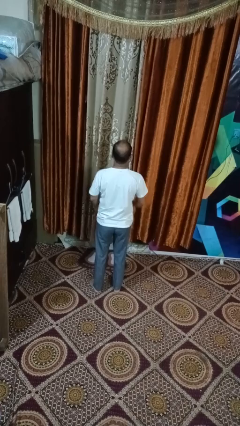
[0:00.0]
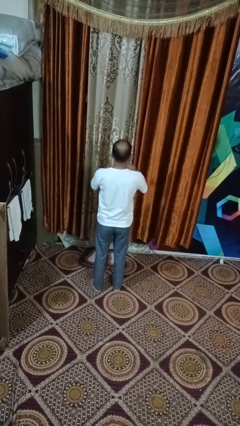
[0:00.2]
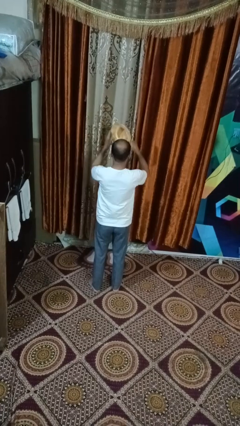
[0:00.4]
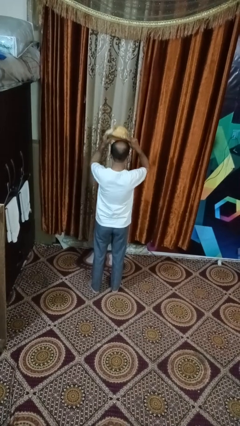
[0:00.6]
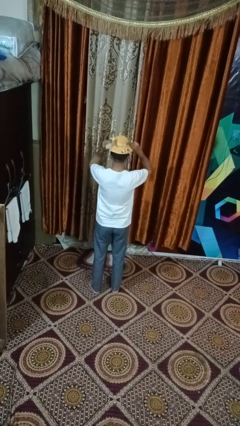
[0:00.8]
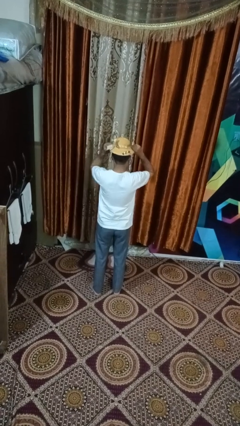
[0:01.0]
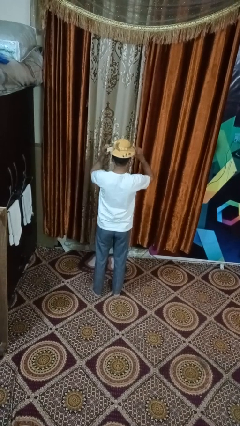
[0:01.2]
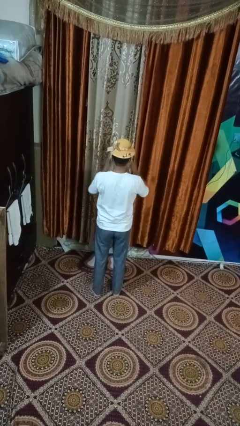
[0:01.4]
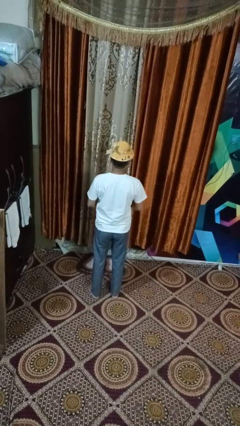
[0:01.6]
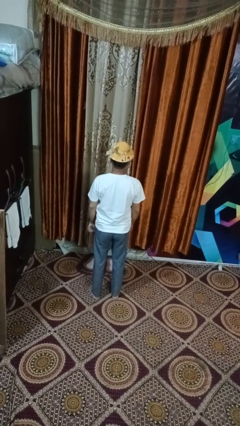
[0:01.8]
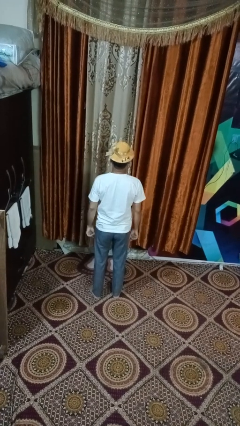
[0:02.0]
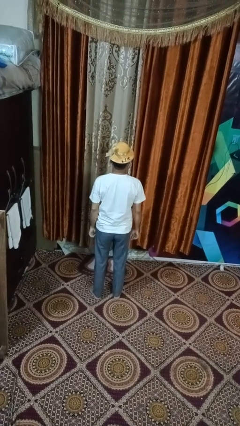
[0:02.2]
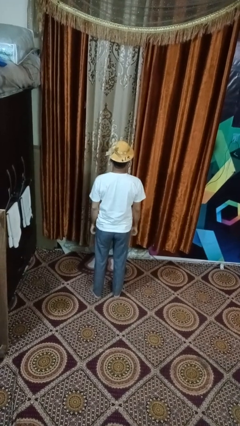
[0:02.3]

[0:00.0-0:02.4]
person puts on hat

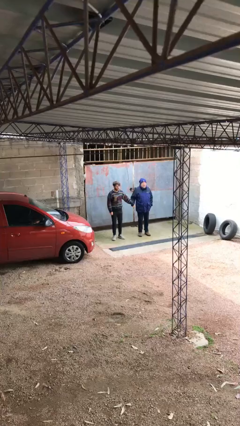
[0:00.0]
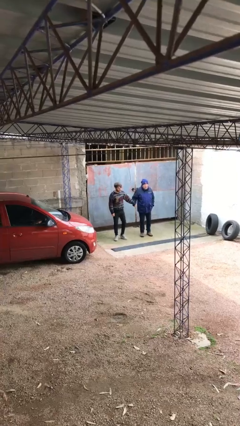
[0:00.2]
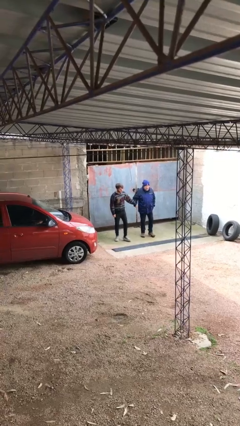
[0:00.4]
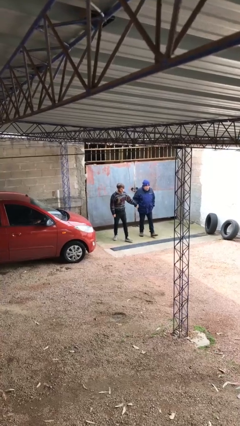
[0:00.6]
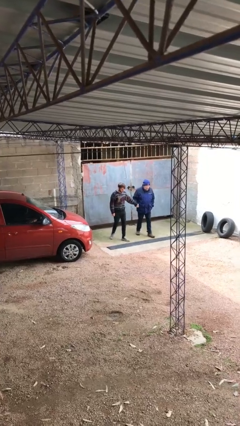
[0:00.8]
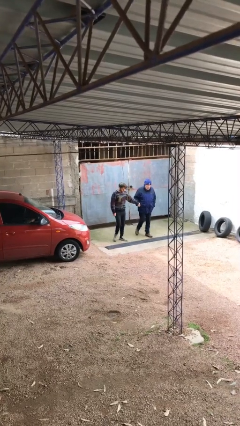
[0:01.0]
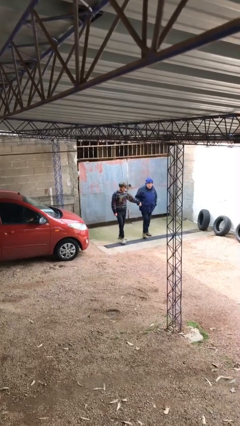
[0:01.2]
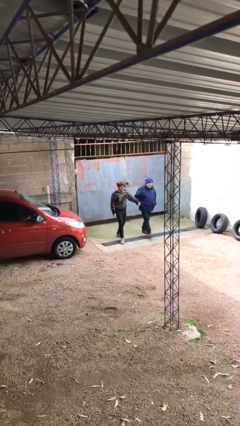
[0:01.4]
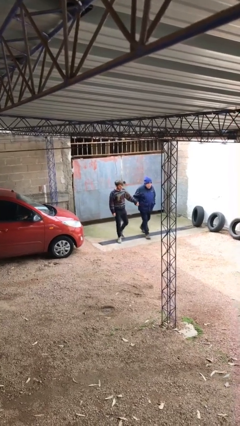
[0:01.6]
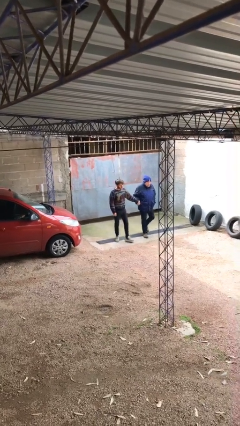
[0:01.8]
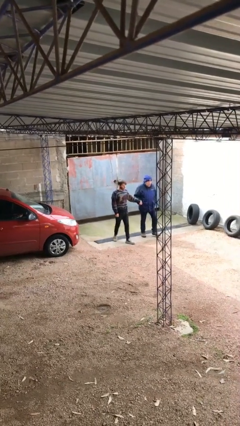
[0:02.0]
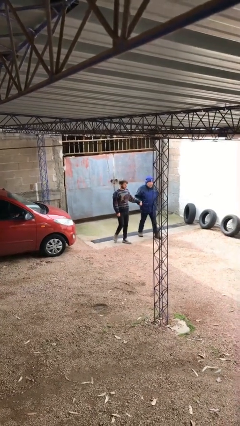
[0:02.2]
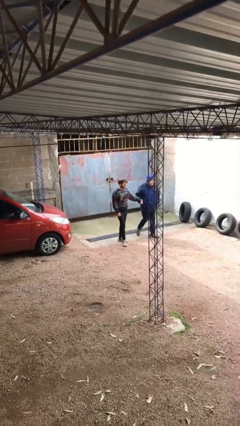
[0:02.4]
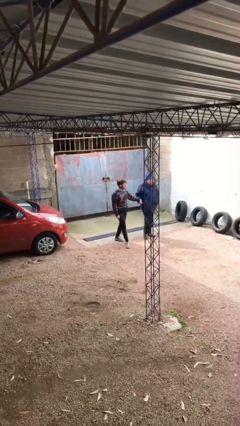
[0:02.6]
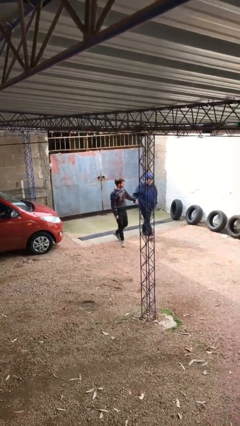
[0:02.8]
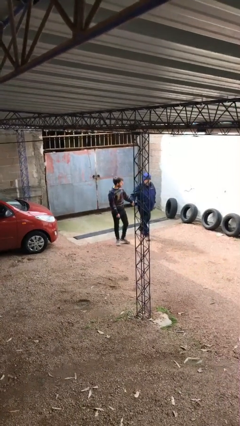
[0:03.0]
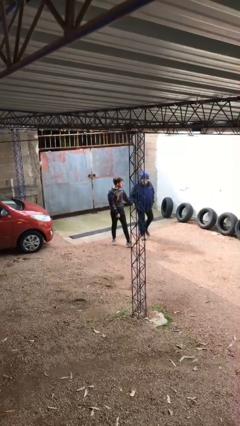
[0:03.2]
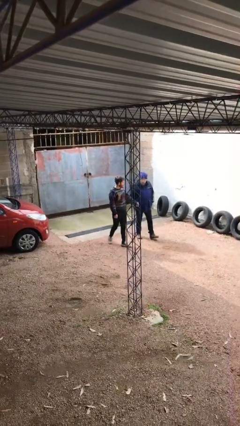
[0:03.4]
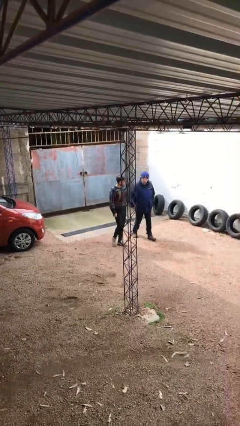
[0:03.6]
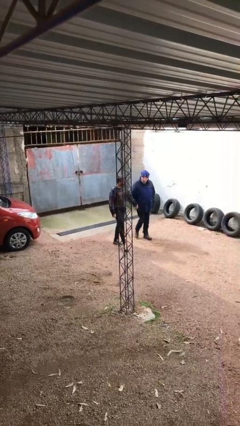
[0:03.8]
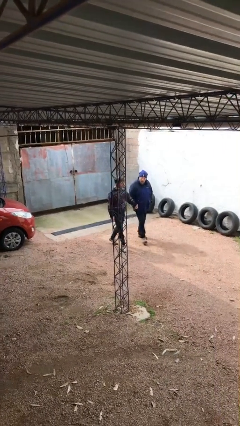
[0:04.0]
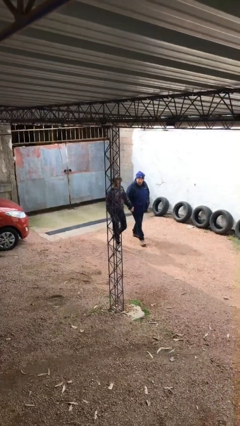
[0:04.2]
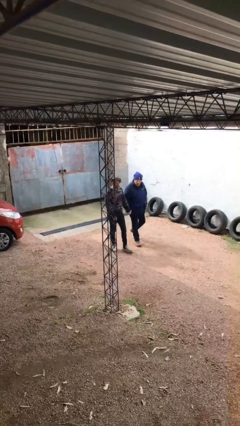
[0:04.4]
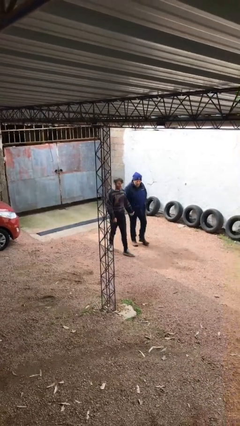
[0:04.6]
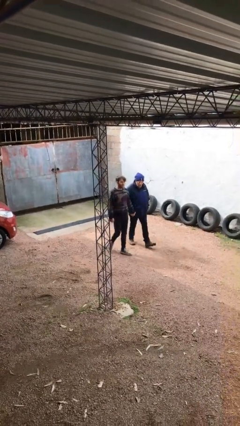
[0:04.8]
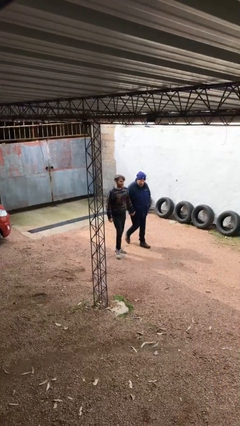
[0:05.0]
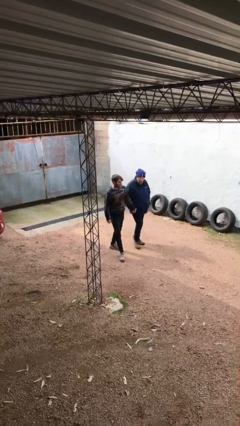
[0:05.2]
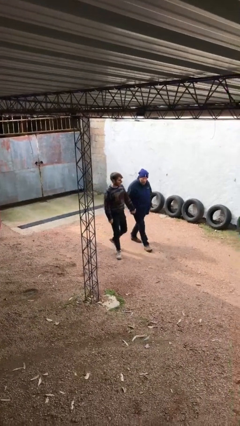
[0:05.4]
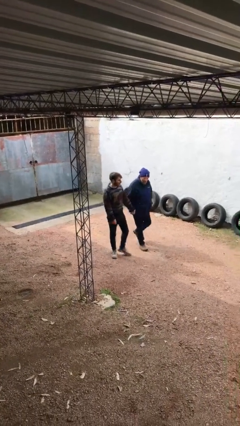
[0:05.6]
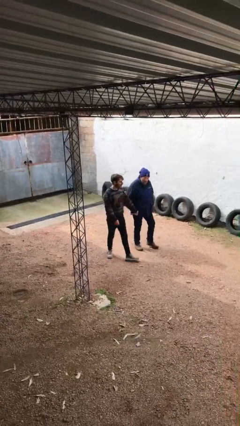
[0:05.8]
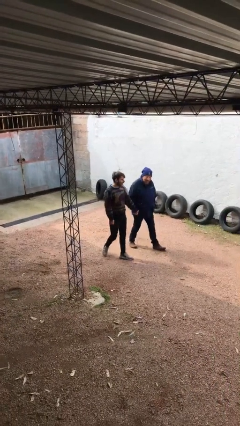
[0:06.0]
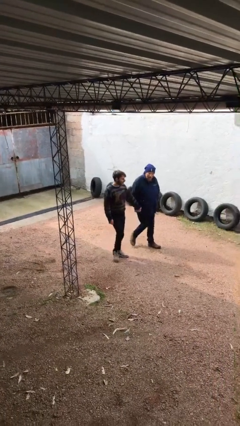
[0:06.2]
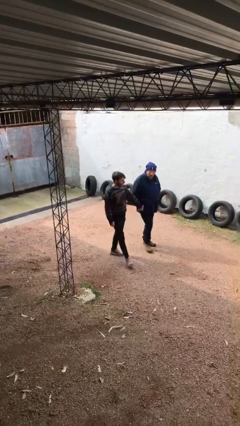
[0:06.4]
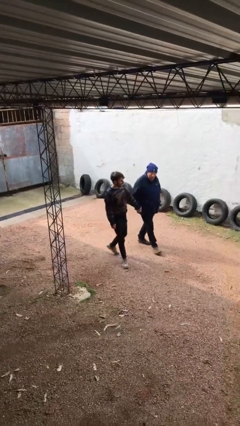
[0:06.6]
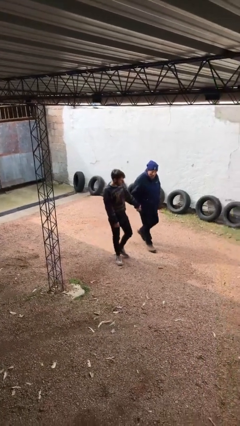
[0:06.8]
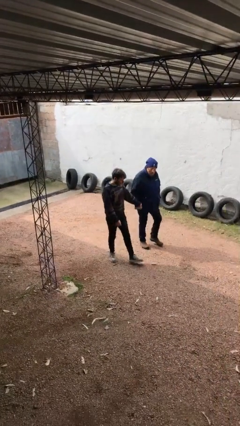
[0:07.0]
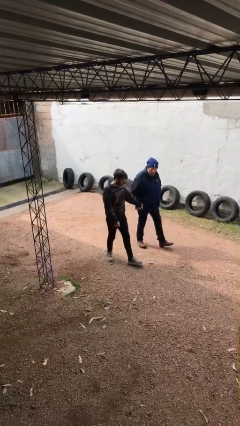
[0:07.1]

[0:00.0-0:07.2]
person holds hand

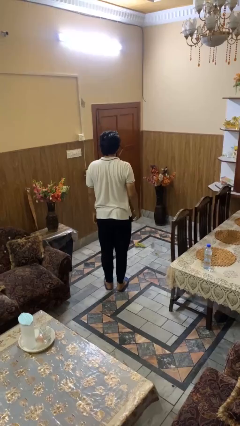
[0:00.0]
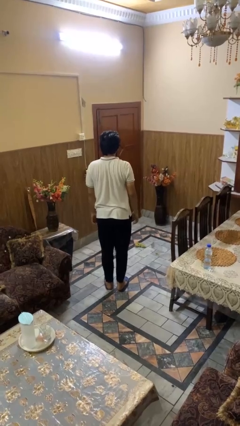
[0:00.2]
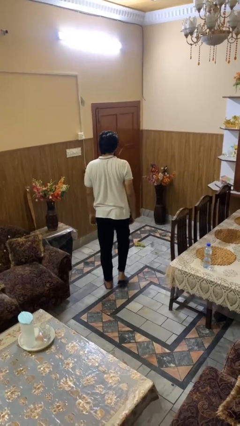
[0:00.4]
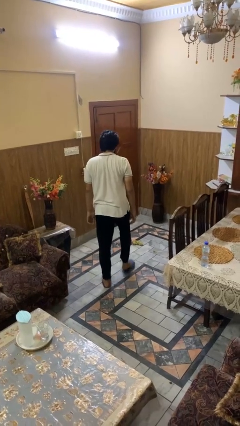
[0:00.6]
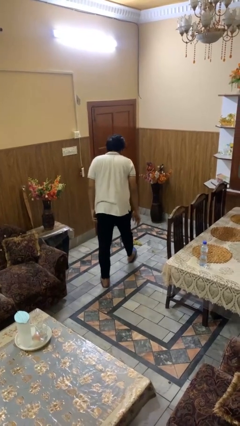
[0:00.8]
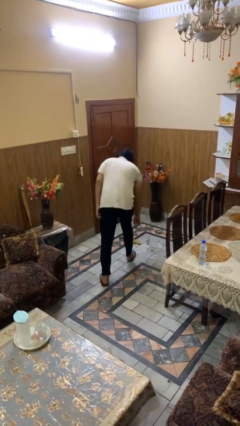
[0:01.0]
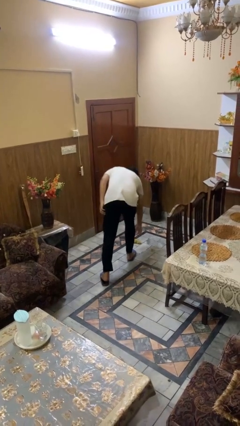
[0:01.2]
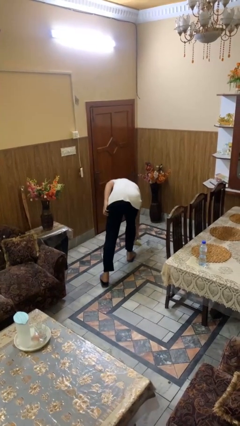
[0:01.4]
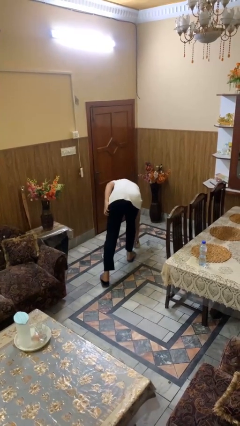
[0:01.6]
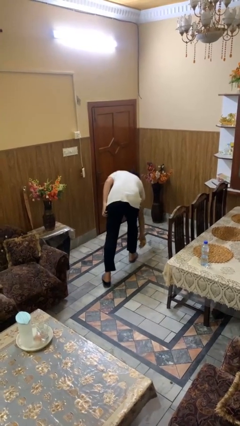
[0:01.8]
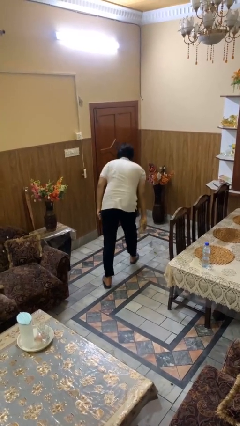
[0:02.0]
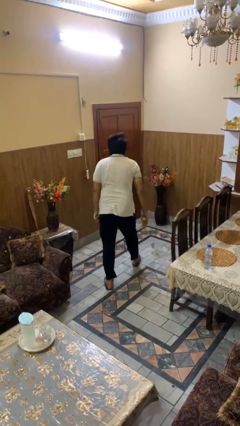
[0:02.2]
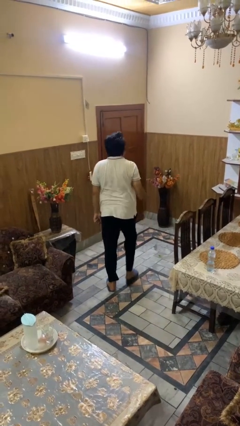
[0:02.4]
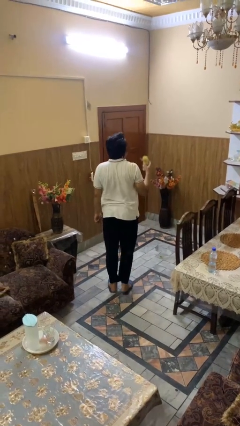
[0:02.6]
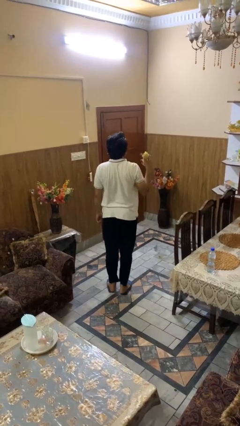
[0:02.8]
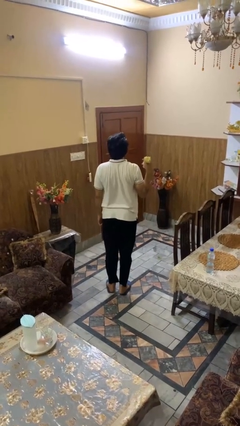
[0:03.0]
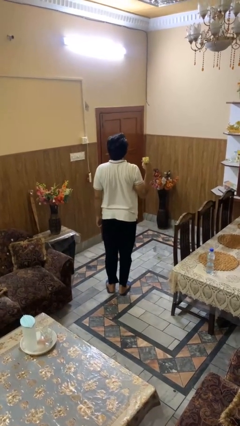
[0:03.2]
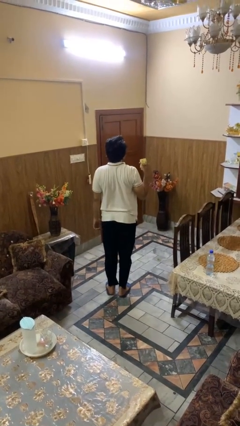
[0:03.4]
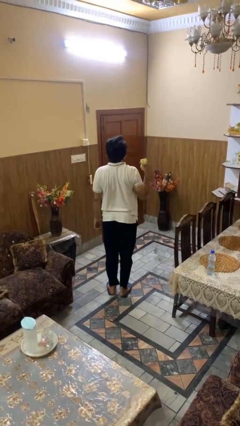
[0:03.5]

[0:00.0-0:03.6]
person picks up object from floor

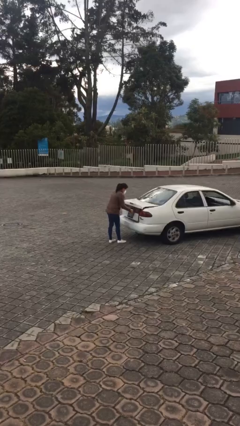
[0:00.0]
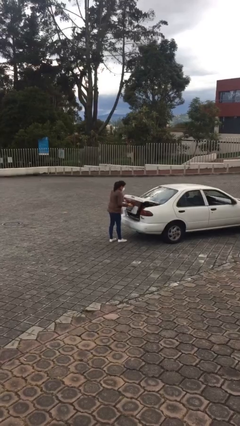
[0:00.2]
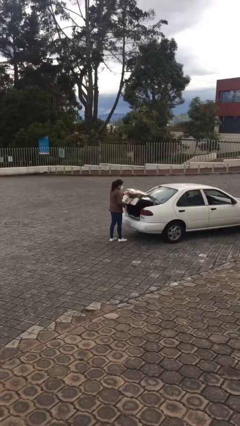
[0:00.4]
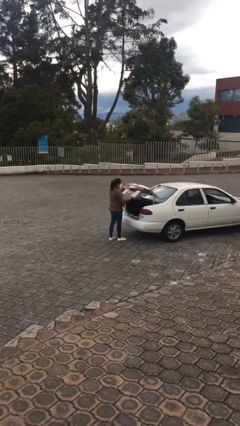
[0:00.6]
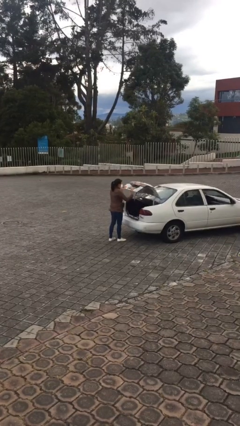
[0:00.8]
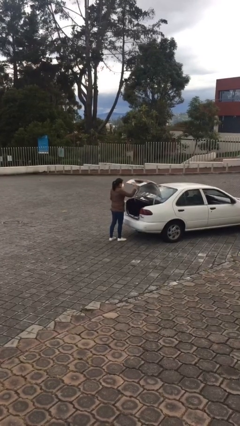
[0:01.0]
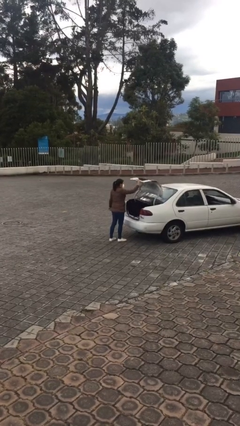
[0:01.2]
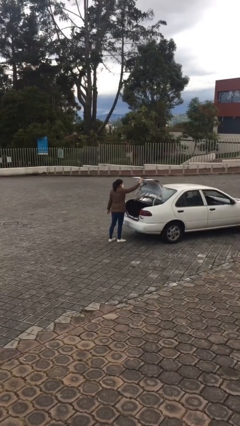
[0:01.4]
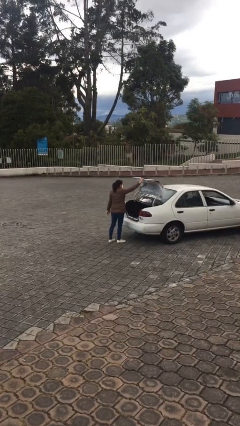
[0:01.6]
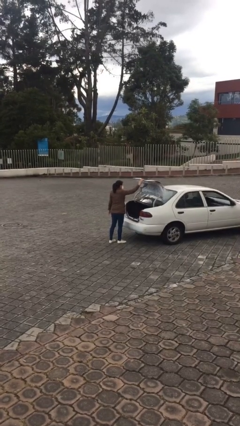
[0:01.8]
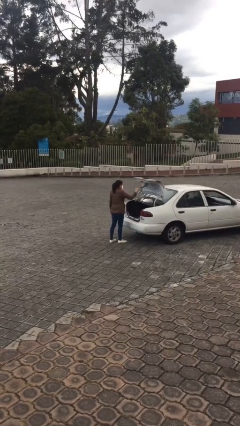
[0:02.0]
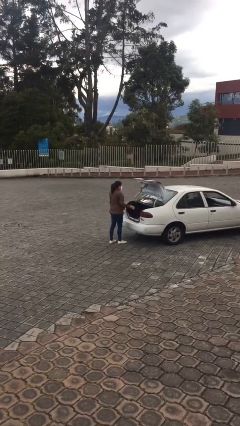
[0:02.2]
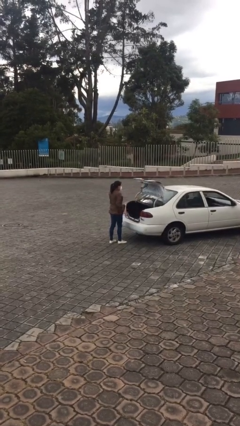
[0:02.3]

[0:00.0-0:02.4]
person opens car trunk

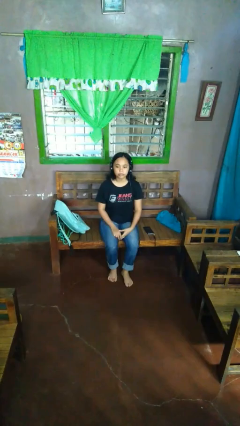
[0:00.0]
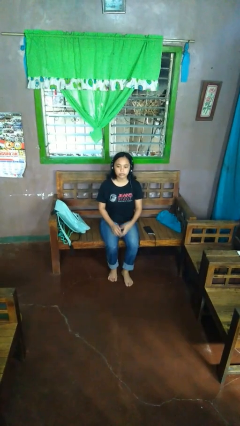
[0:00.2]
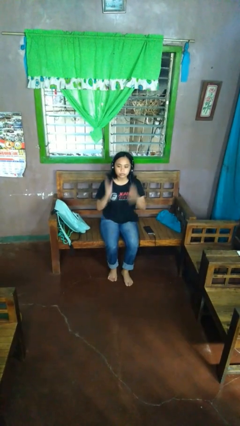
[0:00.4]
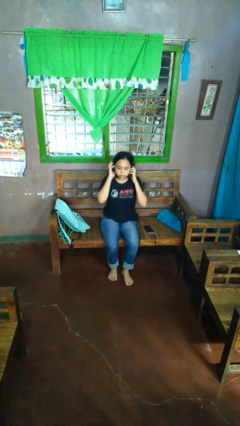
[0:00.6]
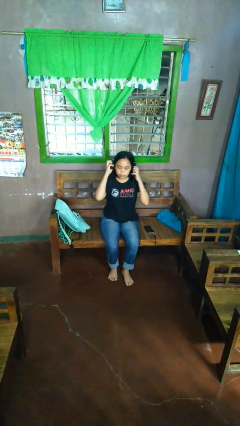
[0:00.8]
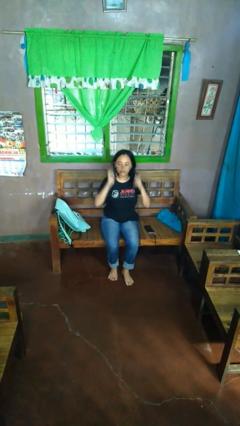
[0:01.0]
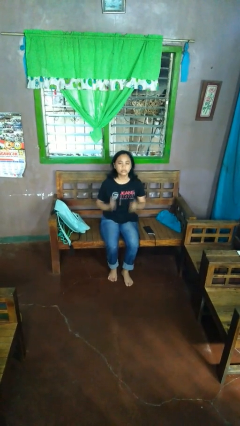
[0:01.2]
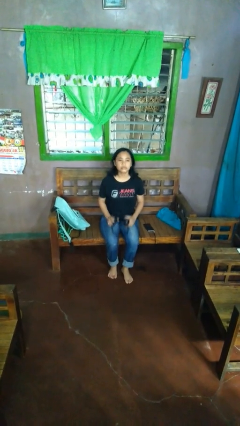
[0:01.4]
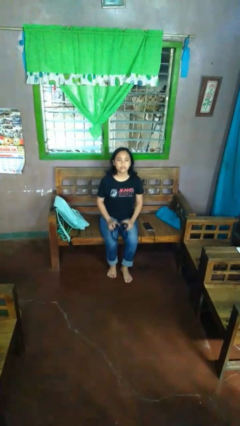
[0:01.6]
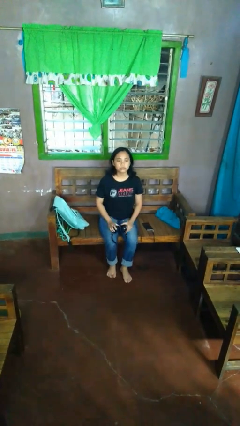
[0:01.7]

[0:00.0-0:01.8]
person takes off headphones
